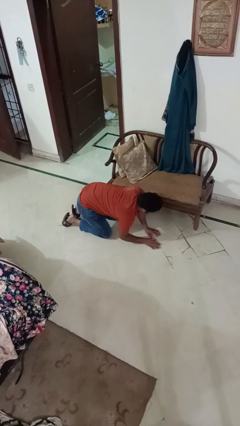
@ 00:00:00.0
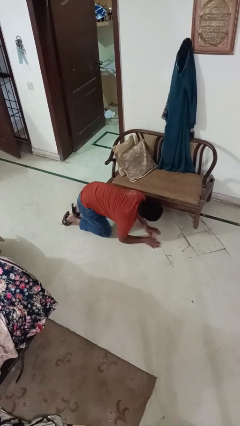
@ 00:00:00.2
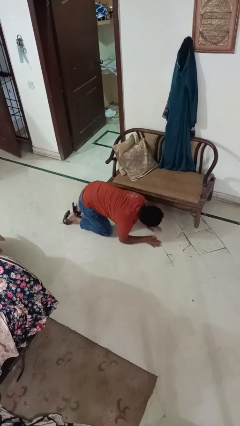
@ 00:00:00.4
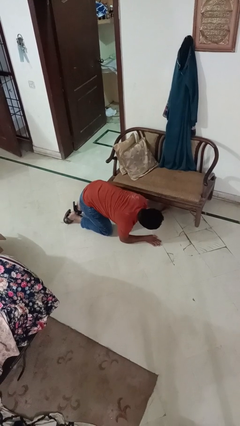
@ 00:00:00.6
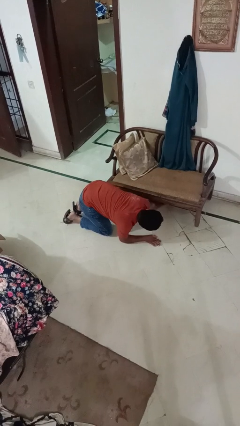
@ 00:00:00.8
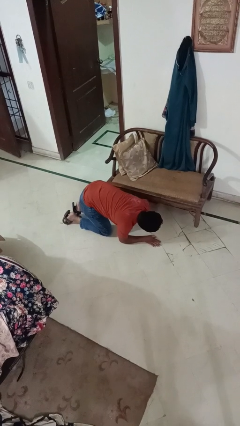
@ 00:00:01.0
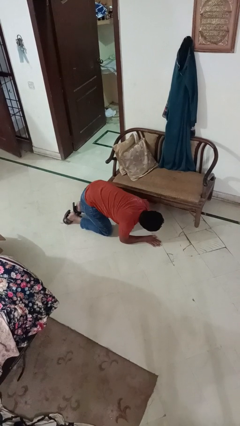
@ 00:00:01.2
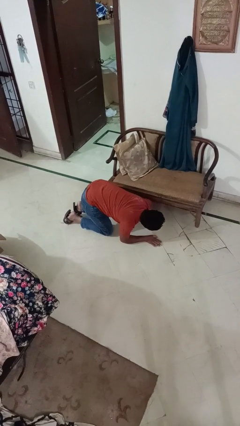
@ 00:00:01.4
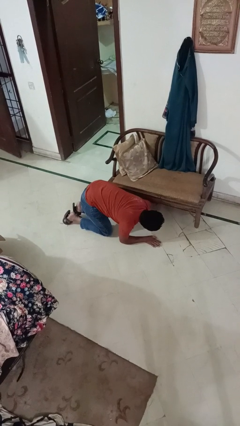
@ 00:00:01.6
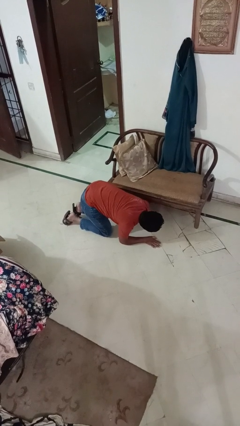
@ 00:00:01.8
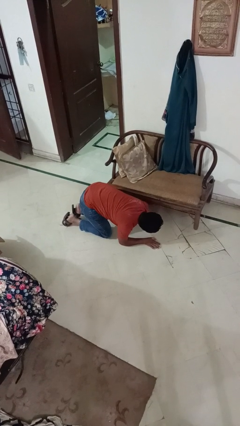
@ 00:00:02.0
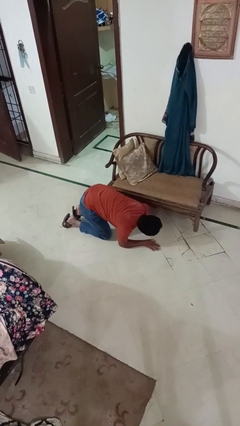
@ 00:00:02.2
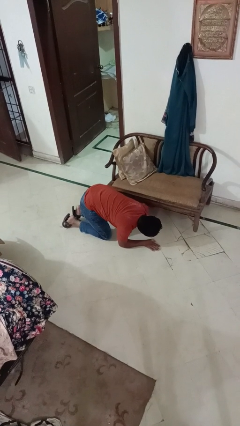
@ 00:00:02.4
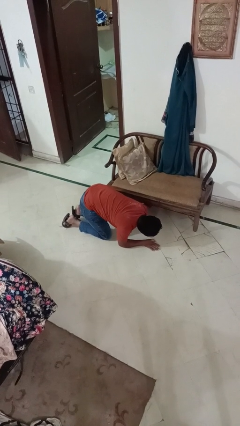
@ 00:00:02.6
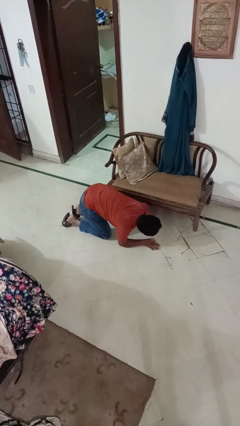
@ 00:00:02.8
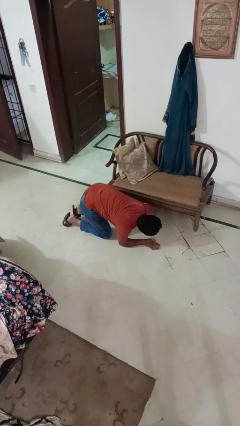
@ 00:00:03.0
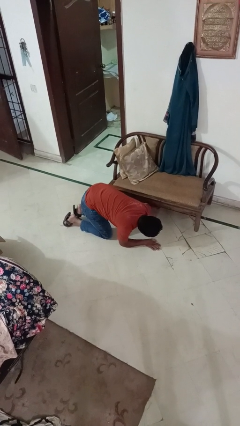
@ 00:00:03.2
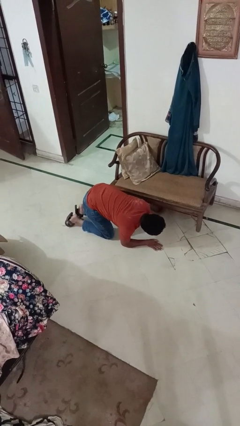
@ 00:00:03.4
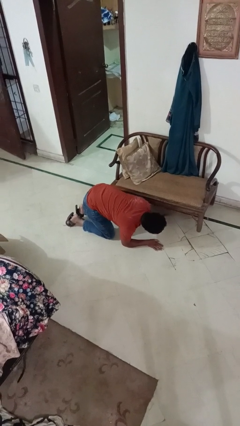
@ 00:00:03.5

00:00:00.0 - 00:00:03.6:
person searches under couch

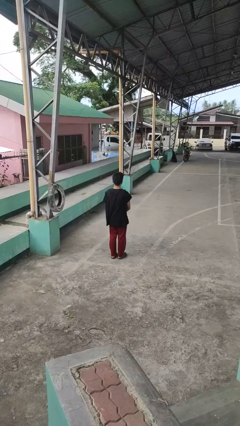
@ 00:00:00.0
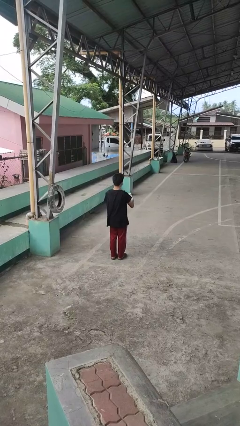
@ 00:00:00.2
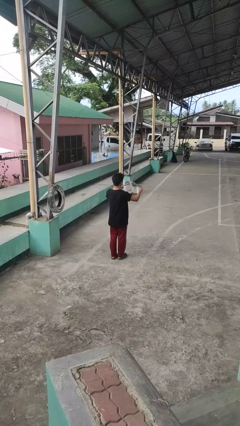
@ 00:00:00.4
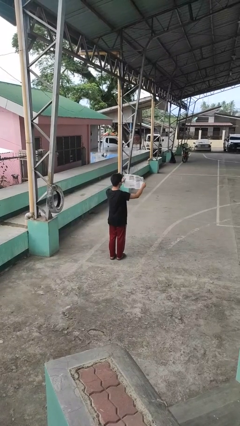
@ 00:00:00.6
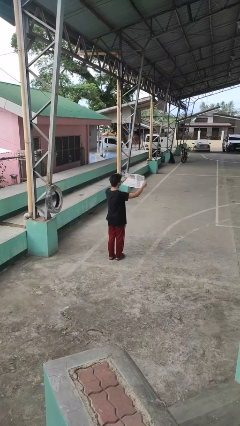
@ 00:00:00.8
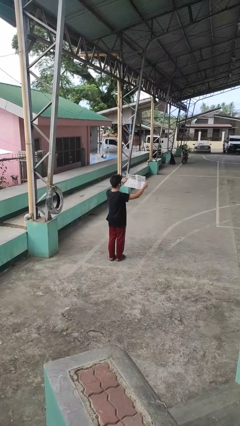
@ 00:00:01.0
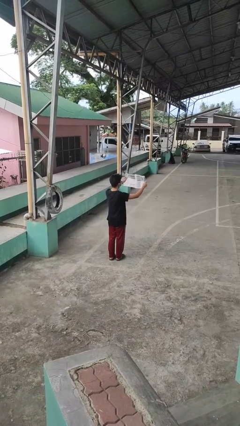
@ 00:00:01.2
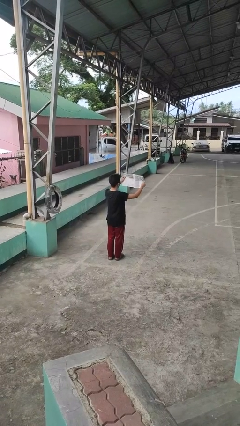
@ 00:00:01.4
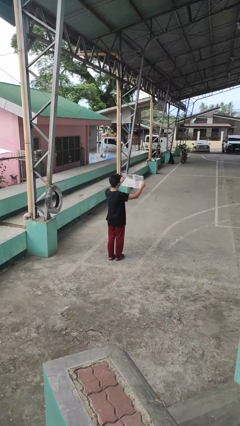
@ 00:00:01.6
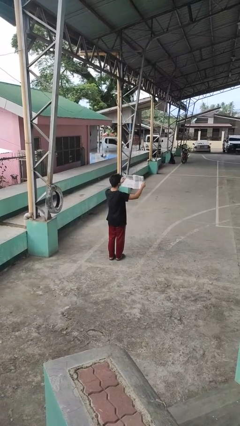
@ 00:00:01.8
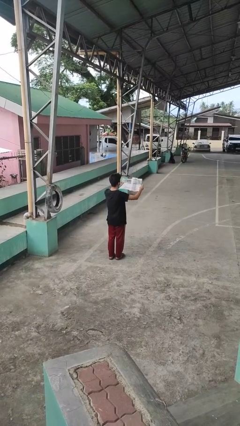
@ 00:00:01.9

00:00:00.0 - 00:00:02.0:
person reads newspaper

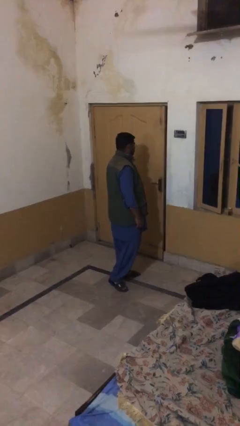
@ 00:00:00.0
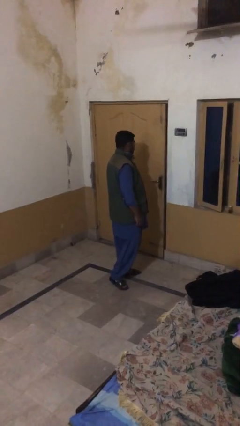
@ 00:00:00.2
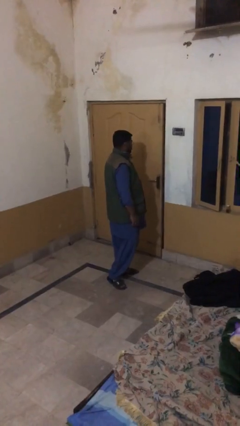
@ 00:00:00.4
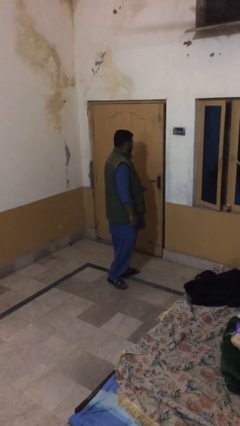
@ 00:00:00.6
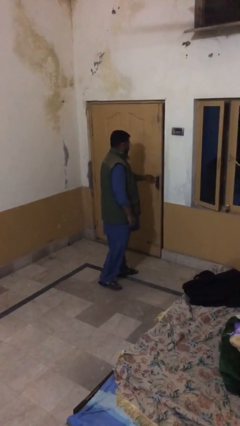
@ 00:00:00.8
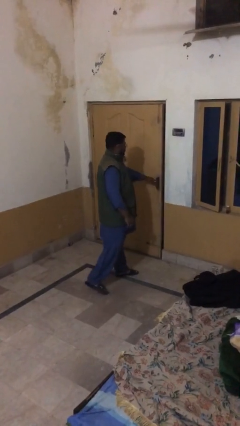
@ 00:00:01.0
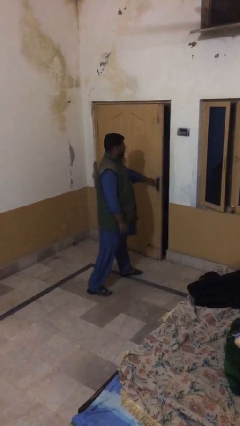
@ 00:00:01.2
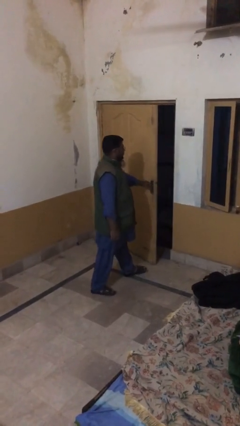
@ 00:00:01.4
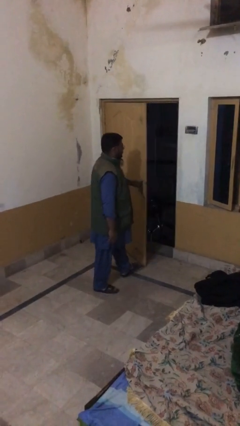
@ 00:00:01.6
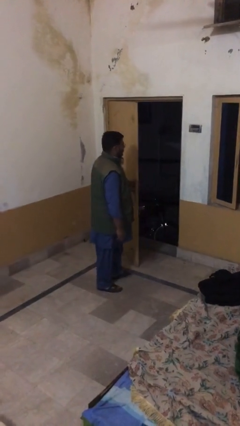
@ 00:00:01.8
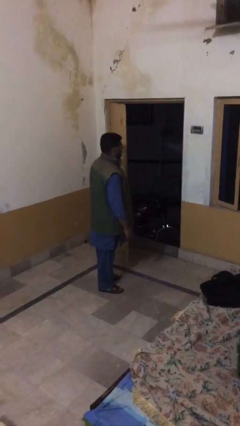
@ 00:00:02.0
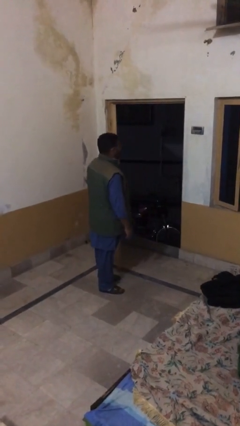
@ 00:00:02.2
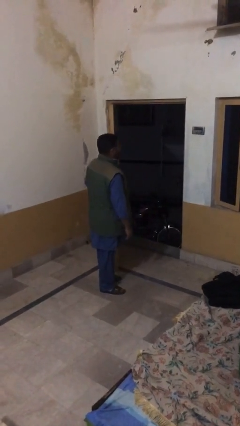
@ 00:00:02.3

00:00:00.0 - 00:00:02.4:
person opens facility door

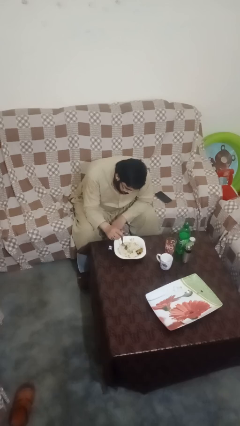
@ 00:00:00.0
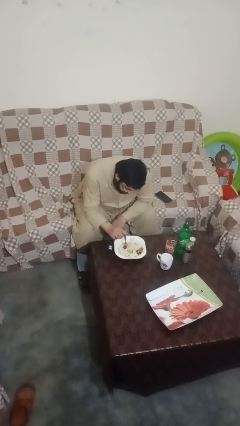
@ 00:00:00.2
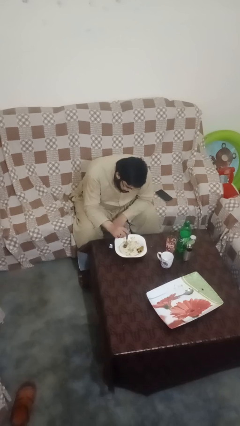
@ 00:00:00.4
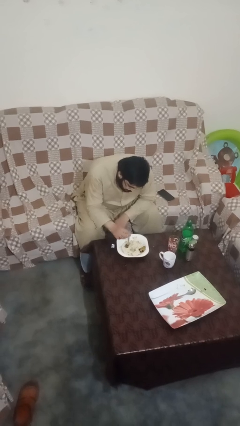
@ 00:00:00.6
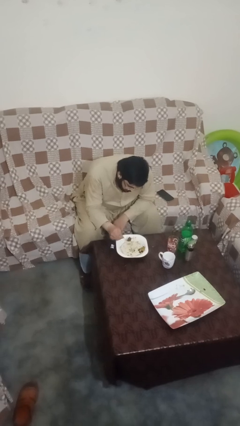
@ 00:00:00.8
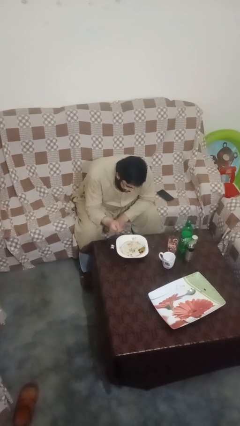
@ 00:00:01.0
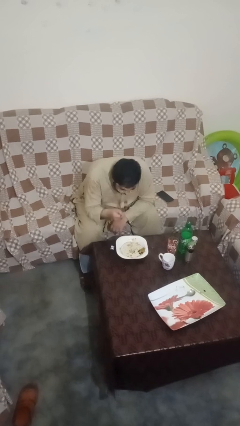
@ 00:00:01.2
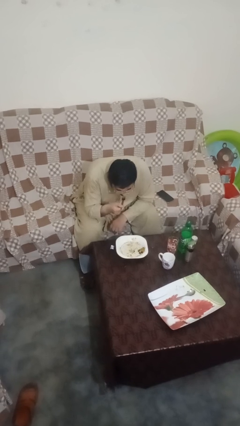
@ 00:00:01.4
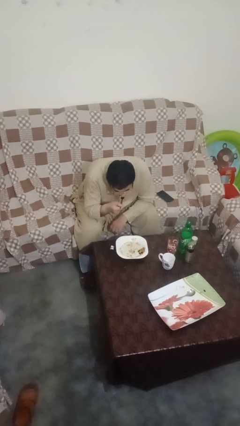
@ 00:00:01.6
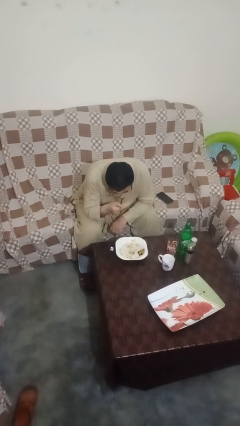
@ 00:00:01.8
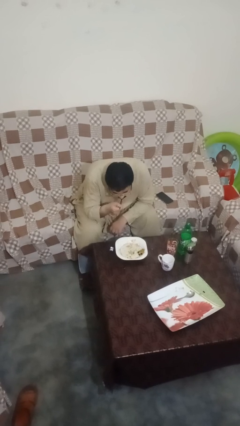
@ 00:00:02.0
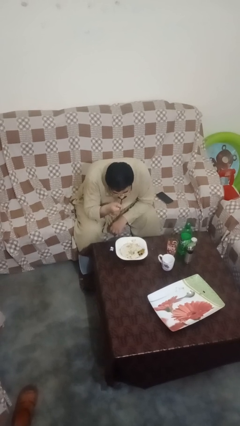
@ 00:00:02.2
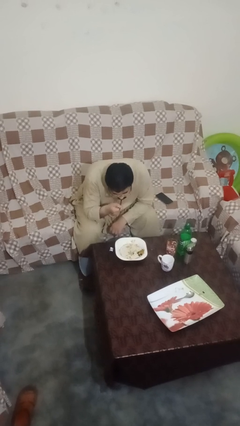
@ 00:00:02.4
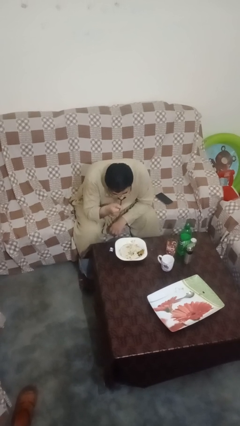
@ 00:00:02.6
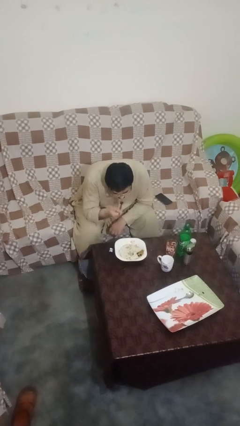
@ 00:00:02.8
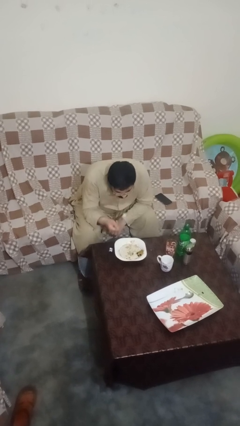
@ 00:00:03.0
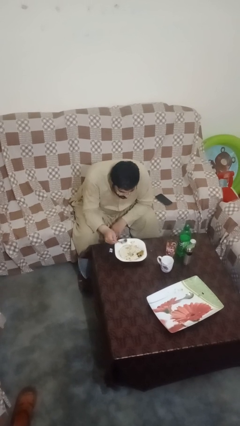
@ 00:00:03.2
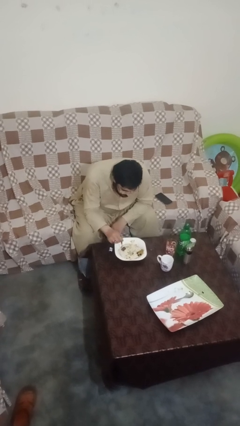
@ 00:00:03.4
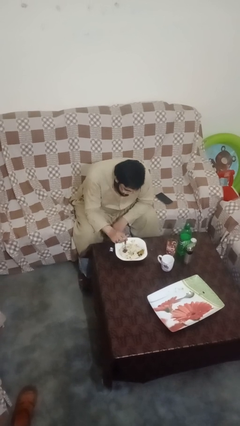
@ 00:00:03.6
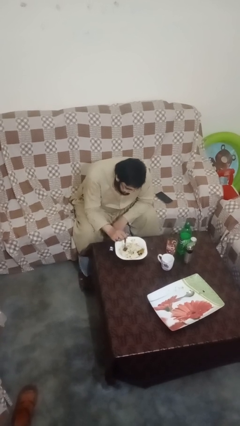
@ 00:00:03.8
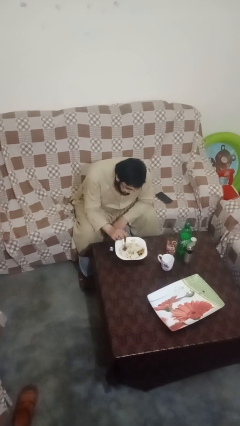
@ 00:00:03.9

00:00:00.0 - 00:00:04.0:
person eats with utensil

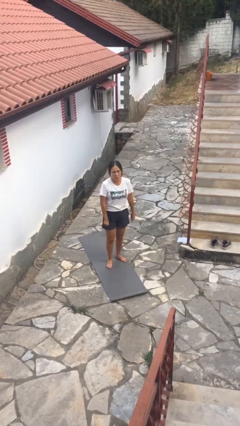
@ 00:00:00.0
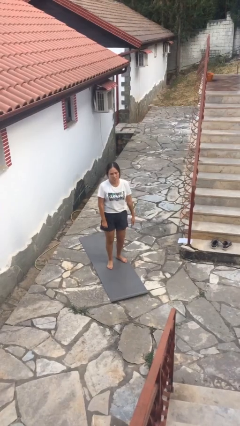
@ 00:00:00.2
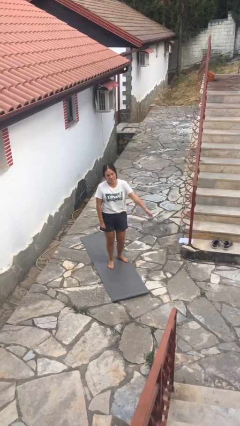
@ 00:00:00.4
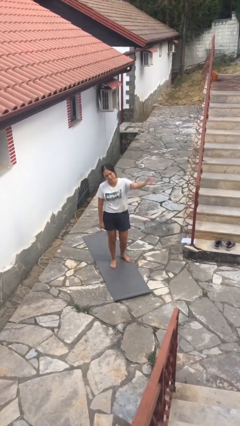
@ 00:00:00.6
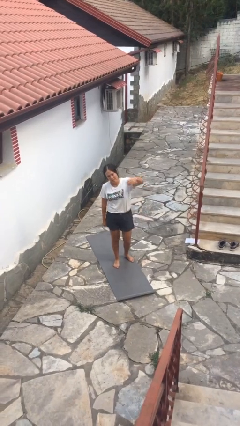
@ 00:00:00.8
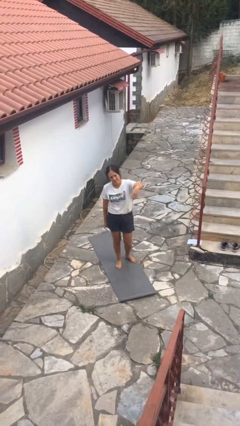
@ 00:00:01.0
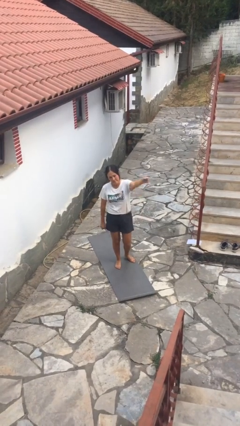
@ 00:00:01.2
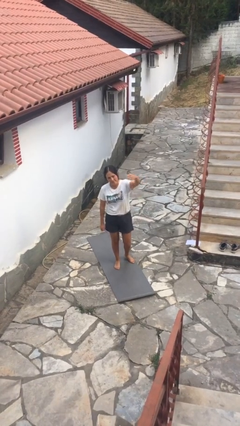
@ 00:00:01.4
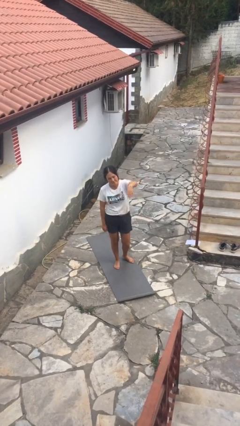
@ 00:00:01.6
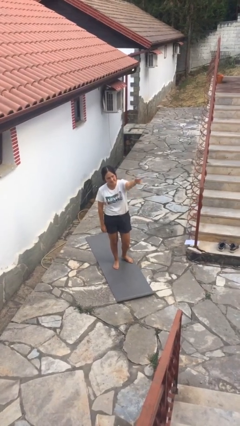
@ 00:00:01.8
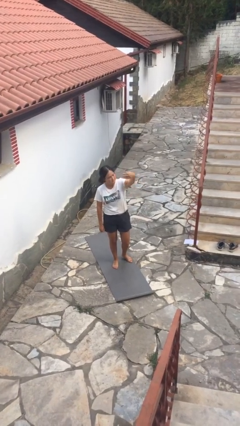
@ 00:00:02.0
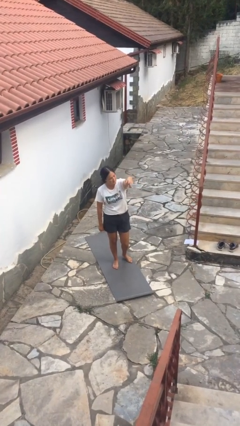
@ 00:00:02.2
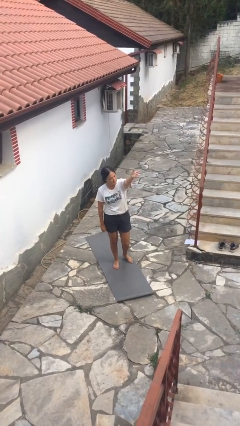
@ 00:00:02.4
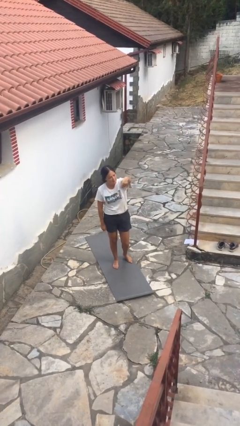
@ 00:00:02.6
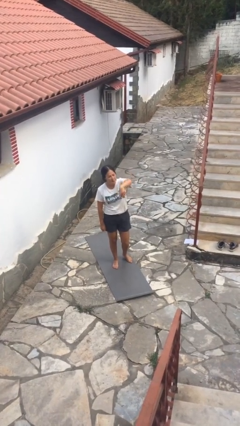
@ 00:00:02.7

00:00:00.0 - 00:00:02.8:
person gestures come here

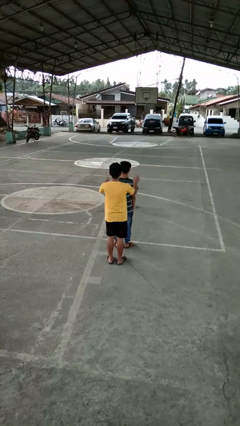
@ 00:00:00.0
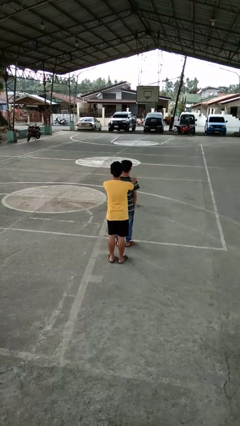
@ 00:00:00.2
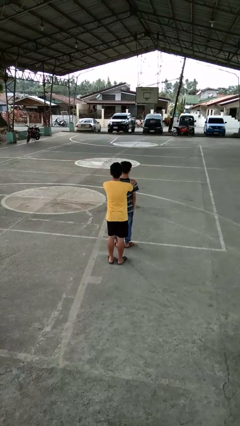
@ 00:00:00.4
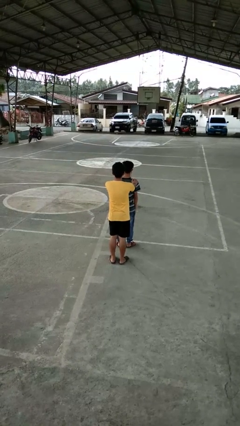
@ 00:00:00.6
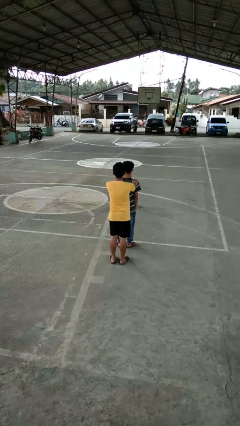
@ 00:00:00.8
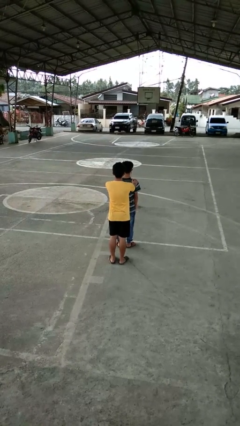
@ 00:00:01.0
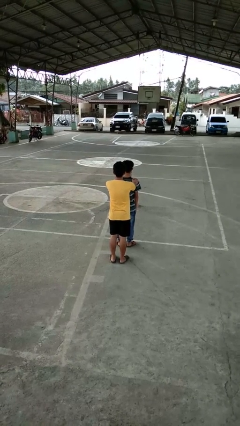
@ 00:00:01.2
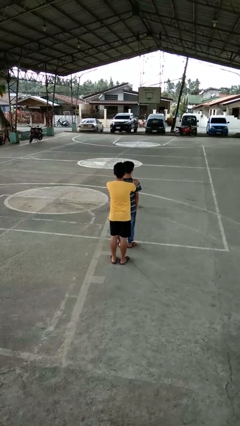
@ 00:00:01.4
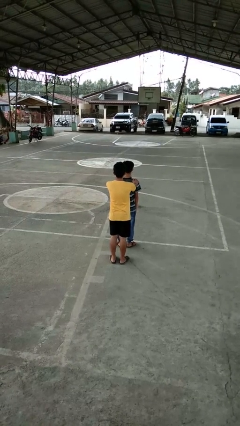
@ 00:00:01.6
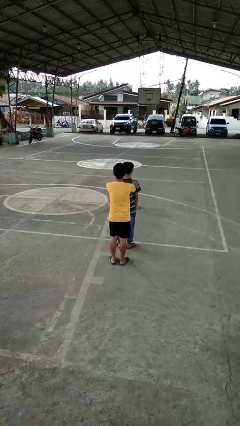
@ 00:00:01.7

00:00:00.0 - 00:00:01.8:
person grabs person by shoulder

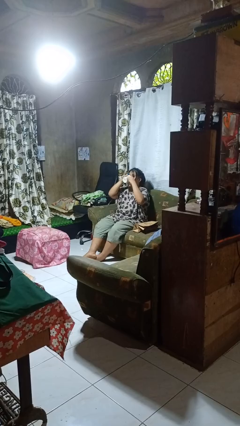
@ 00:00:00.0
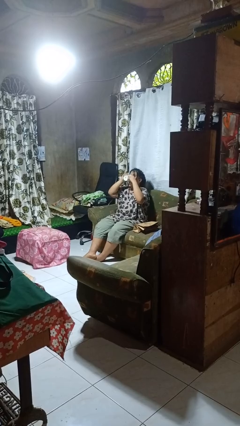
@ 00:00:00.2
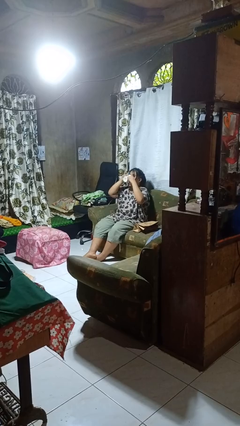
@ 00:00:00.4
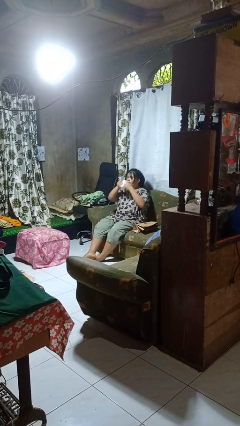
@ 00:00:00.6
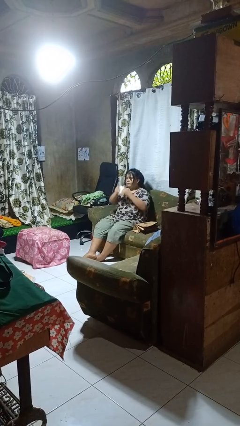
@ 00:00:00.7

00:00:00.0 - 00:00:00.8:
person drinks from mug
